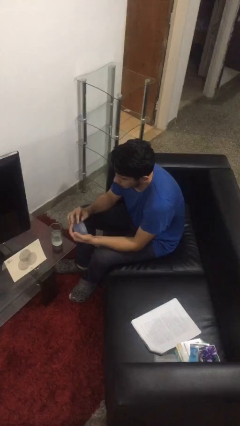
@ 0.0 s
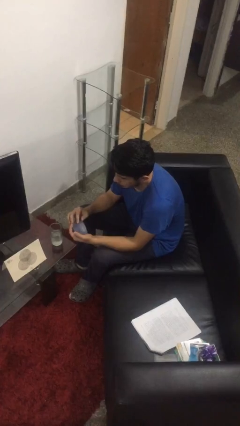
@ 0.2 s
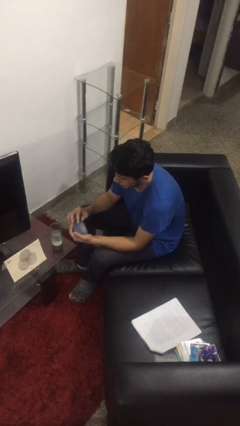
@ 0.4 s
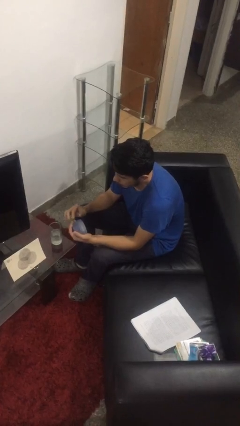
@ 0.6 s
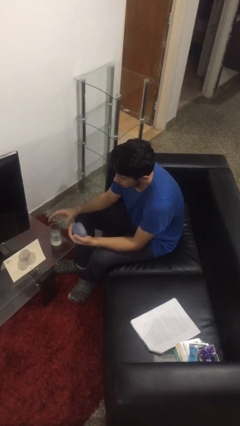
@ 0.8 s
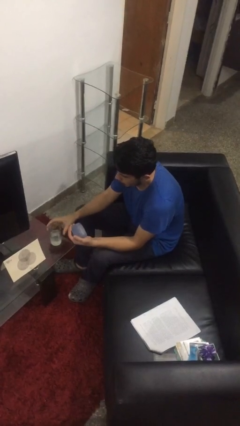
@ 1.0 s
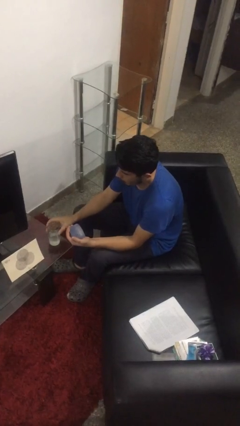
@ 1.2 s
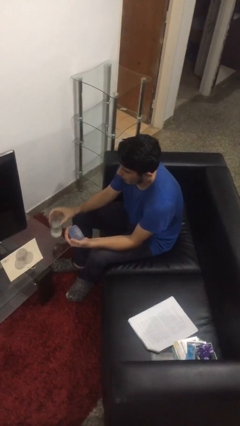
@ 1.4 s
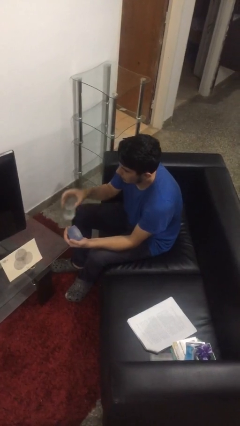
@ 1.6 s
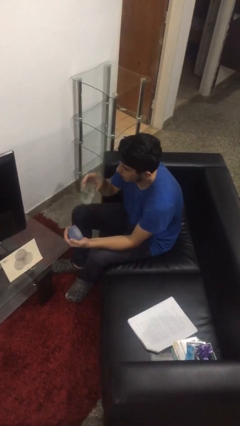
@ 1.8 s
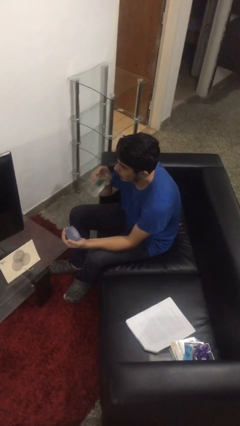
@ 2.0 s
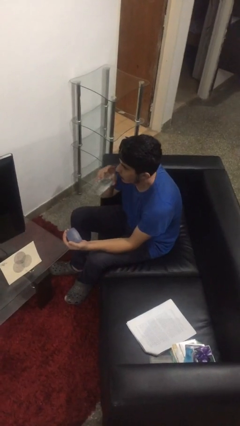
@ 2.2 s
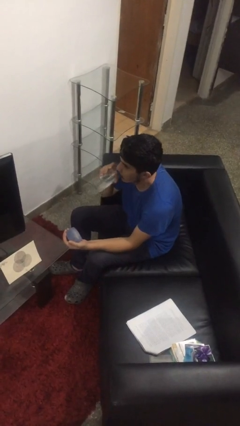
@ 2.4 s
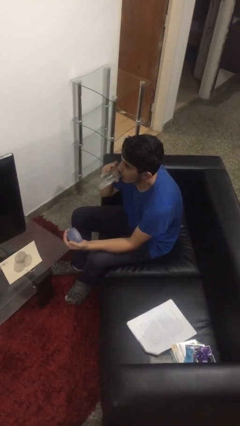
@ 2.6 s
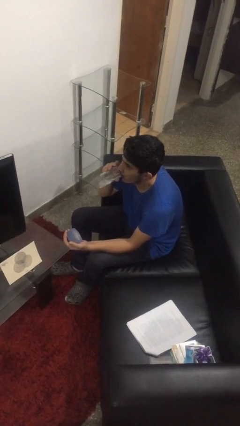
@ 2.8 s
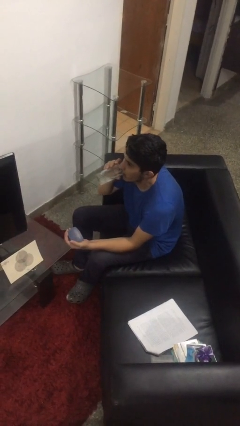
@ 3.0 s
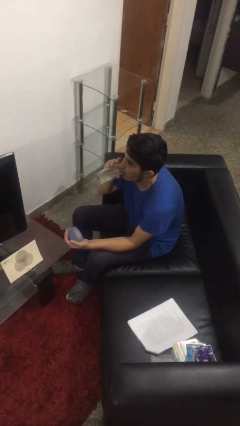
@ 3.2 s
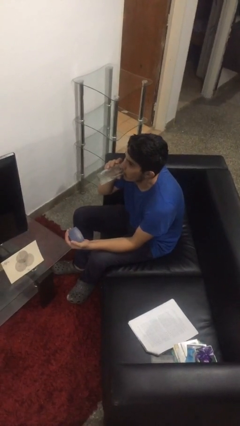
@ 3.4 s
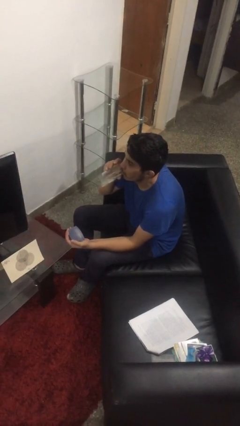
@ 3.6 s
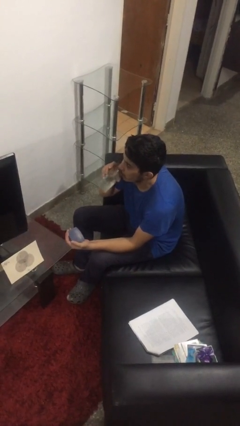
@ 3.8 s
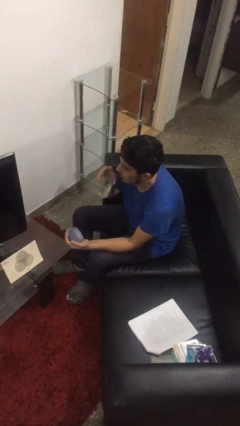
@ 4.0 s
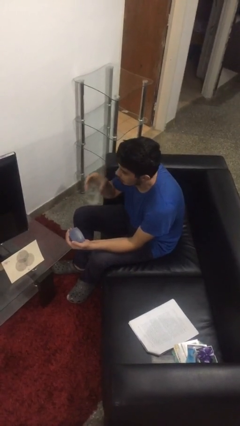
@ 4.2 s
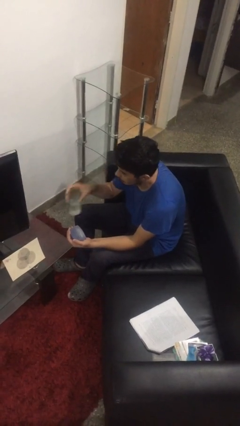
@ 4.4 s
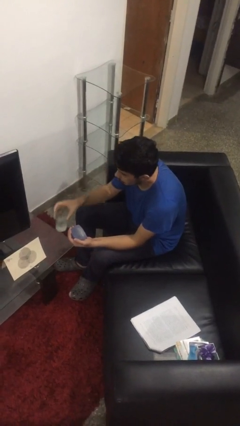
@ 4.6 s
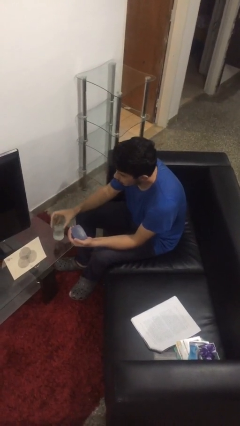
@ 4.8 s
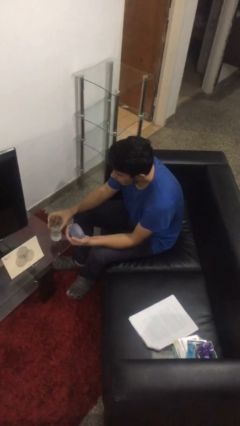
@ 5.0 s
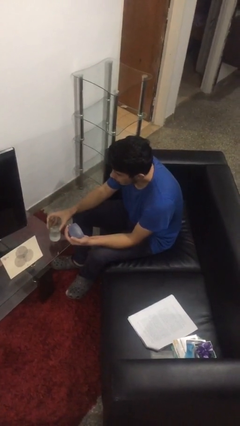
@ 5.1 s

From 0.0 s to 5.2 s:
person drinks from cup

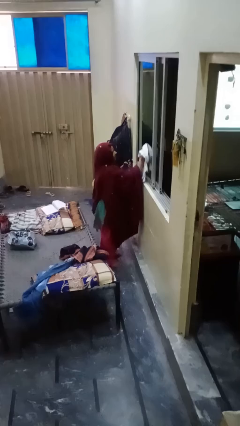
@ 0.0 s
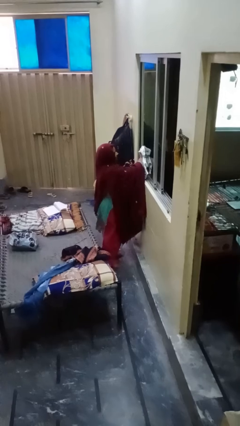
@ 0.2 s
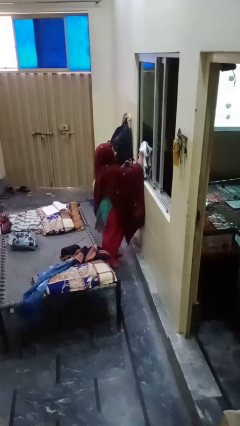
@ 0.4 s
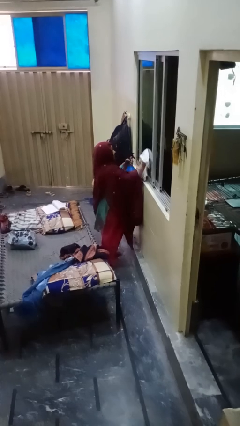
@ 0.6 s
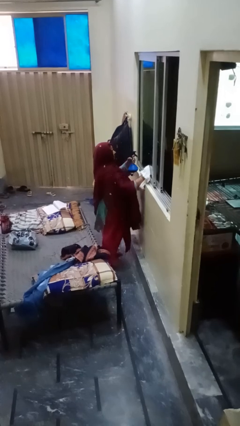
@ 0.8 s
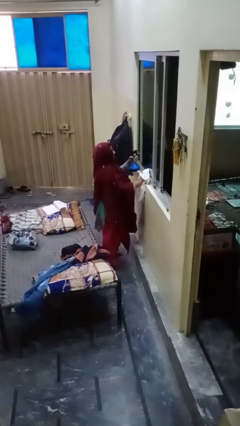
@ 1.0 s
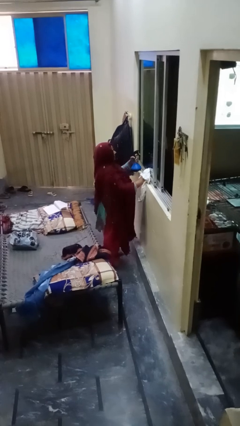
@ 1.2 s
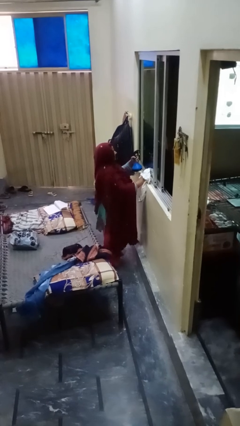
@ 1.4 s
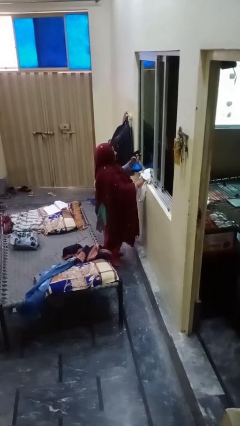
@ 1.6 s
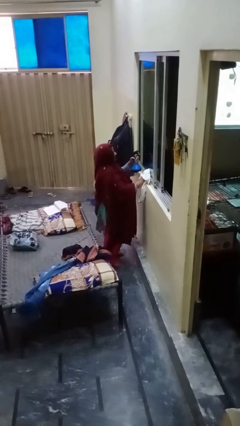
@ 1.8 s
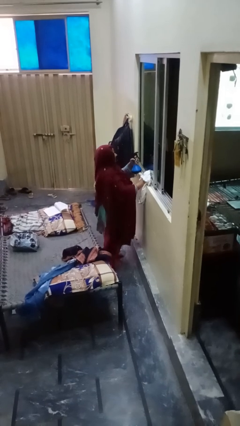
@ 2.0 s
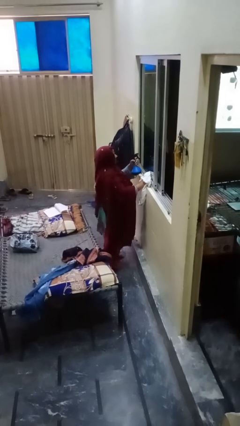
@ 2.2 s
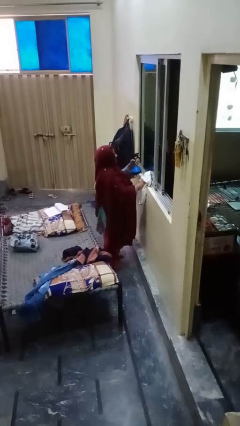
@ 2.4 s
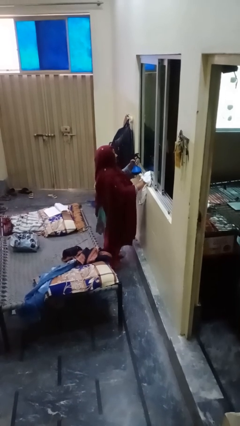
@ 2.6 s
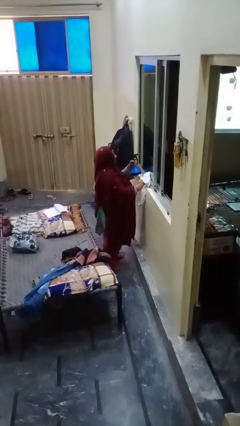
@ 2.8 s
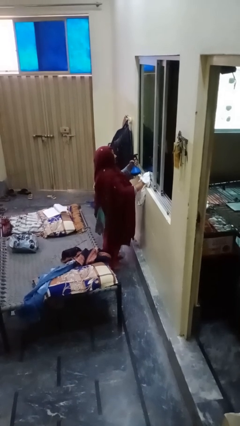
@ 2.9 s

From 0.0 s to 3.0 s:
person sprays from bottle

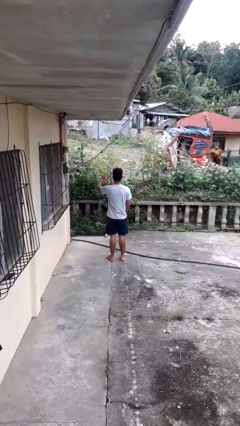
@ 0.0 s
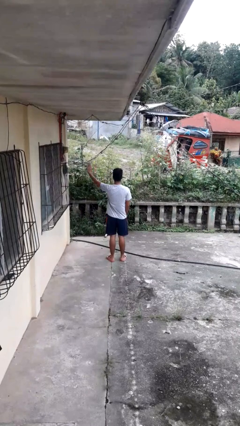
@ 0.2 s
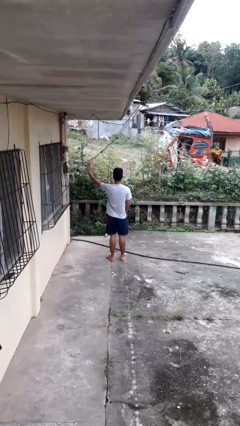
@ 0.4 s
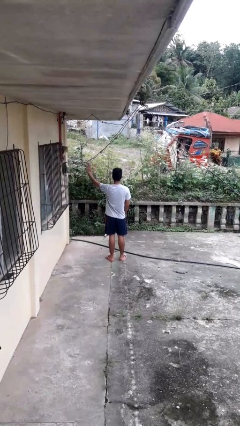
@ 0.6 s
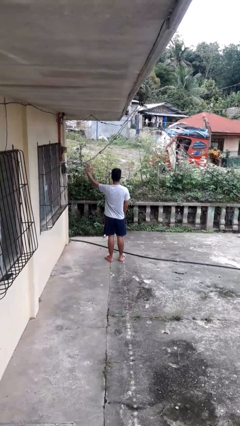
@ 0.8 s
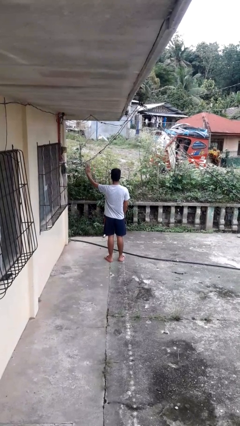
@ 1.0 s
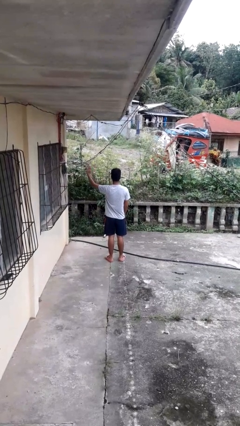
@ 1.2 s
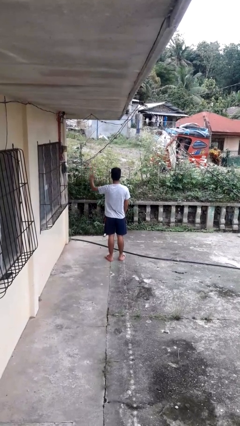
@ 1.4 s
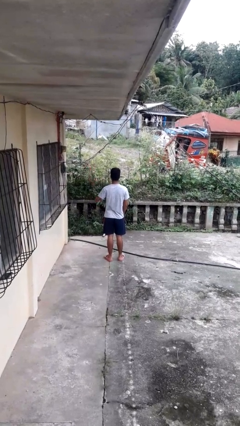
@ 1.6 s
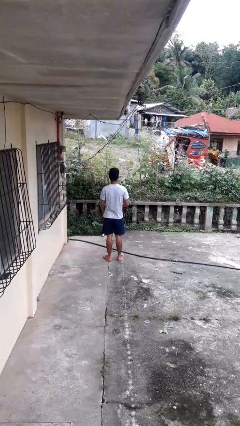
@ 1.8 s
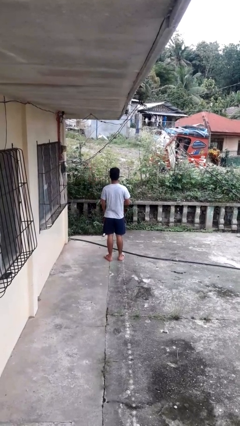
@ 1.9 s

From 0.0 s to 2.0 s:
person gestures swipe left

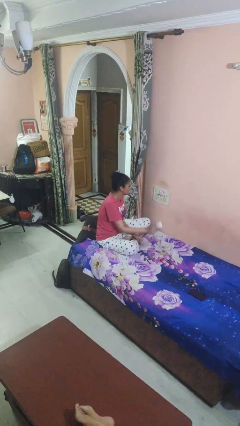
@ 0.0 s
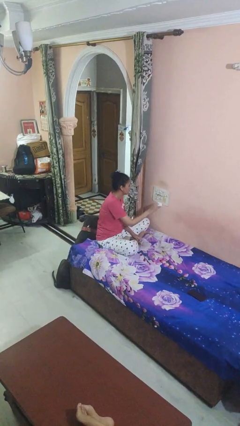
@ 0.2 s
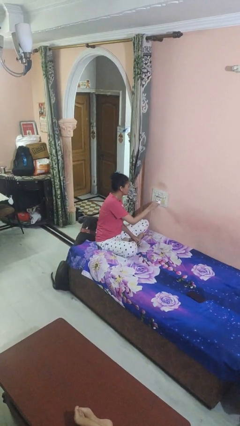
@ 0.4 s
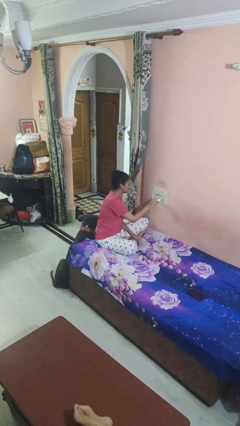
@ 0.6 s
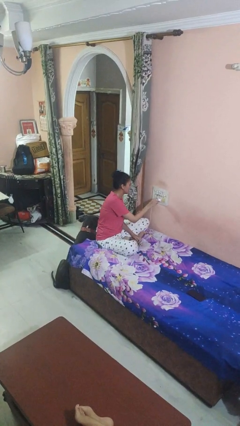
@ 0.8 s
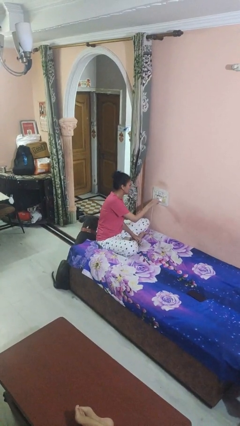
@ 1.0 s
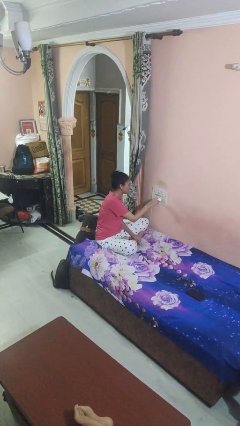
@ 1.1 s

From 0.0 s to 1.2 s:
person plugs into electrical socket

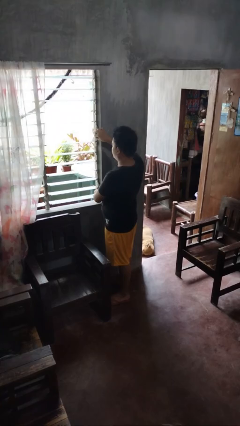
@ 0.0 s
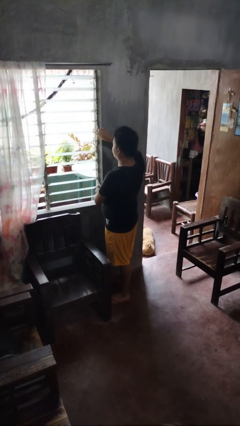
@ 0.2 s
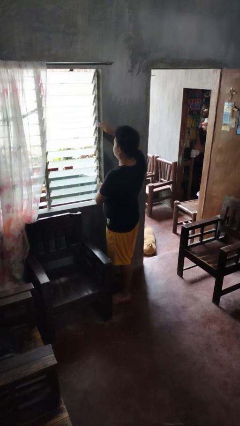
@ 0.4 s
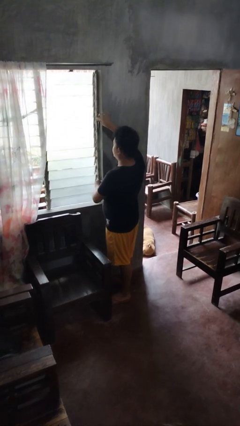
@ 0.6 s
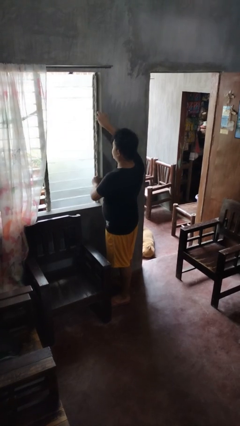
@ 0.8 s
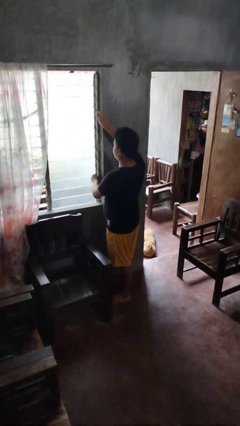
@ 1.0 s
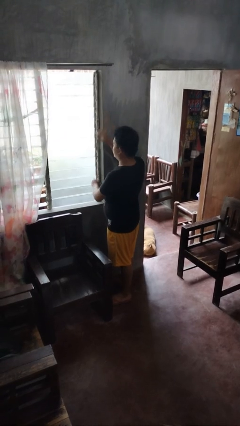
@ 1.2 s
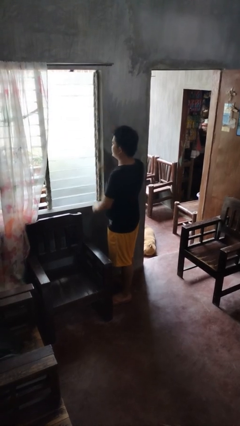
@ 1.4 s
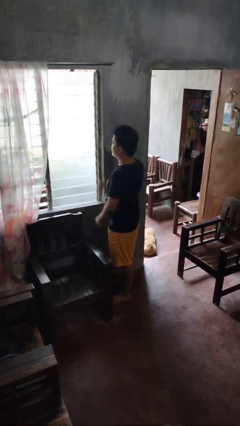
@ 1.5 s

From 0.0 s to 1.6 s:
person closes home window

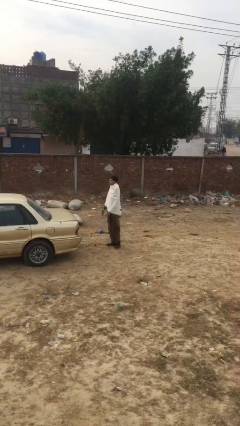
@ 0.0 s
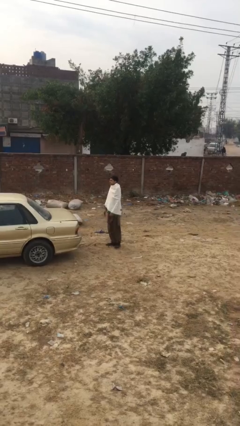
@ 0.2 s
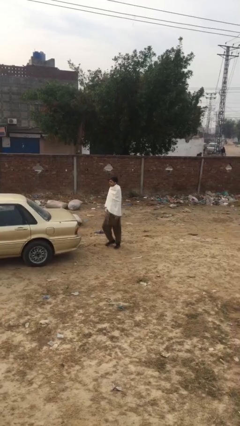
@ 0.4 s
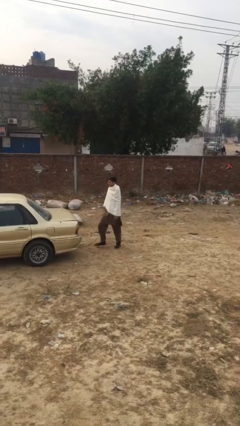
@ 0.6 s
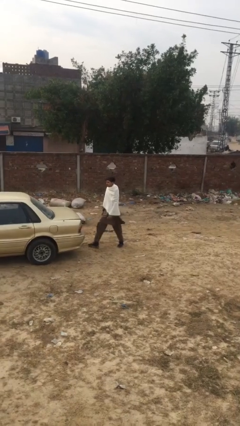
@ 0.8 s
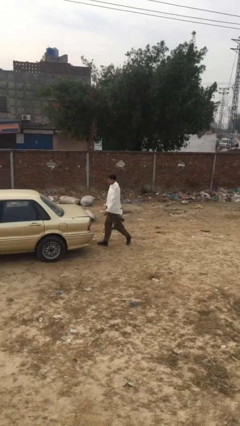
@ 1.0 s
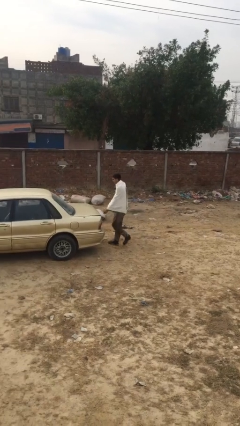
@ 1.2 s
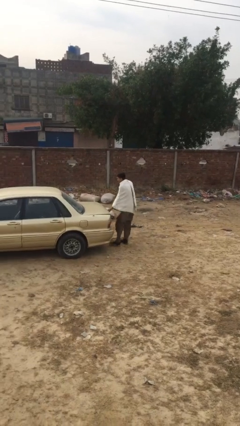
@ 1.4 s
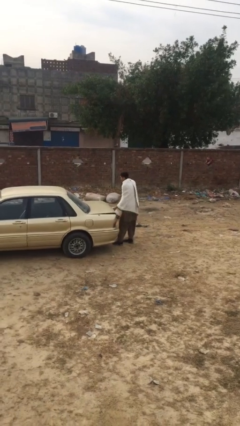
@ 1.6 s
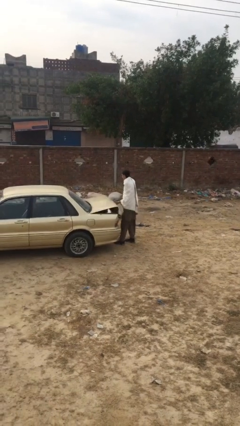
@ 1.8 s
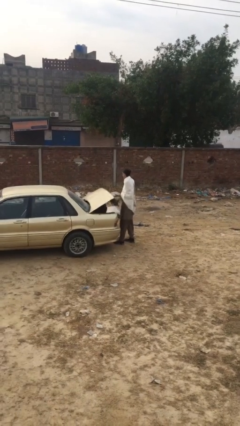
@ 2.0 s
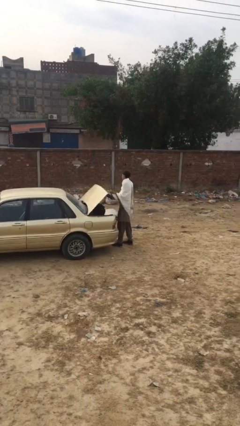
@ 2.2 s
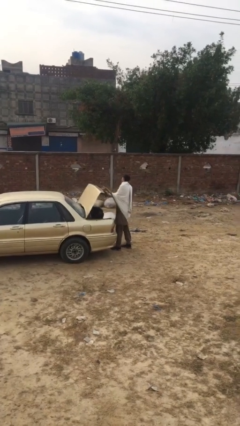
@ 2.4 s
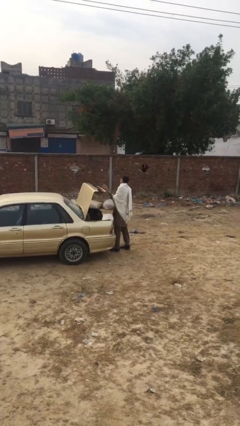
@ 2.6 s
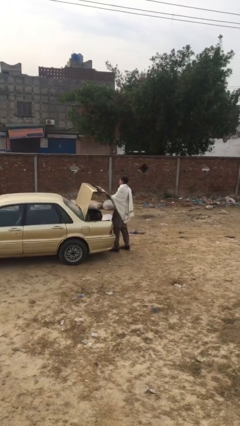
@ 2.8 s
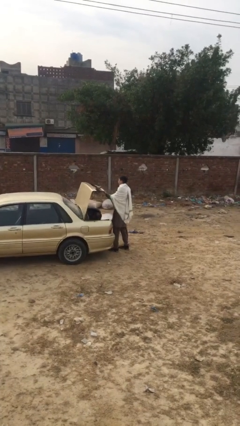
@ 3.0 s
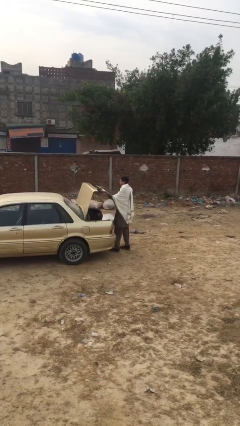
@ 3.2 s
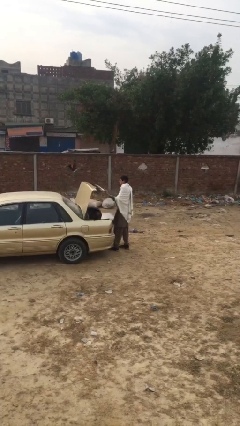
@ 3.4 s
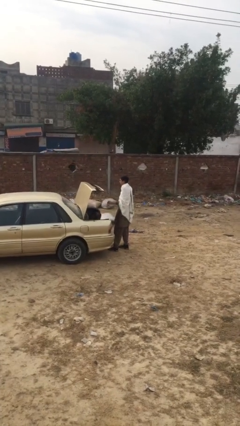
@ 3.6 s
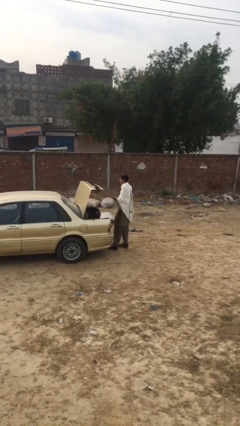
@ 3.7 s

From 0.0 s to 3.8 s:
person opens car trunk

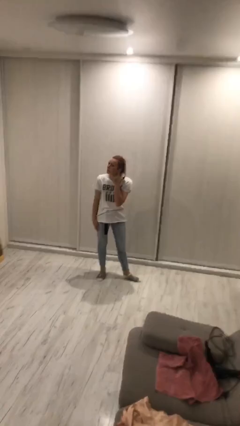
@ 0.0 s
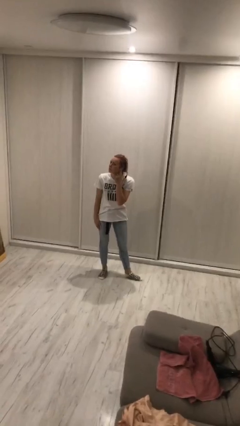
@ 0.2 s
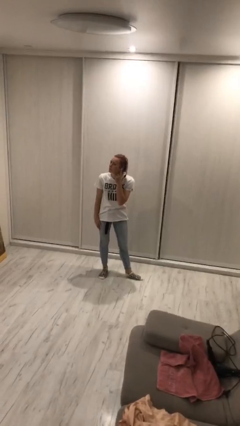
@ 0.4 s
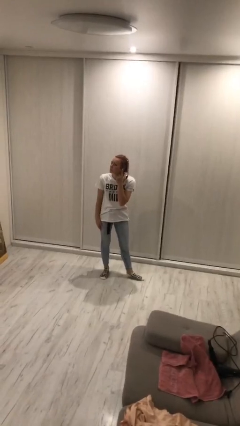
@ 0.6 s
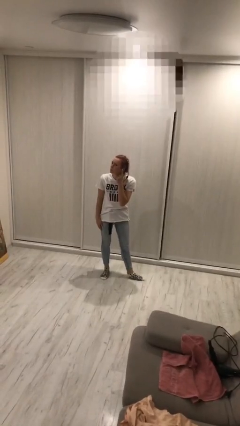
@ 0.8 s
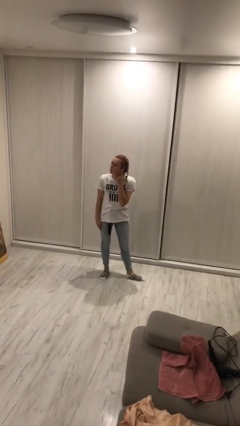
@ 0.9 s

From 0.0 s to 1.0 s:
person gestures listen closely
